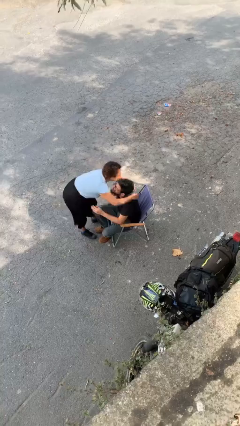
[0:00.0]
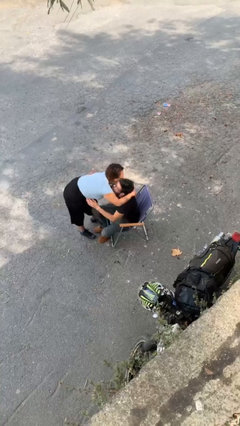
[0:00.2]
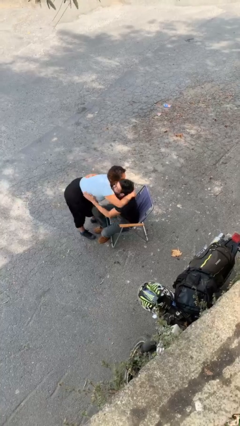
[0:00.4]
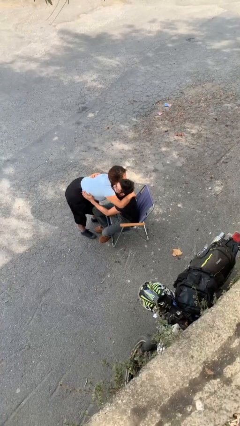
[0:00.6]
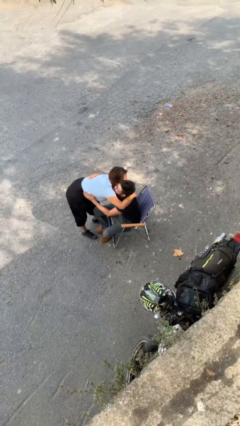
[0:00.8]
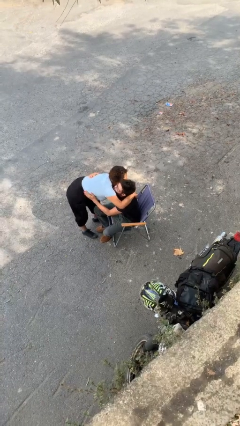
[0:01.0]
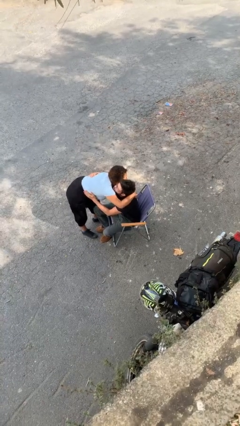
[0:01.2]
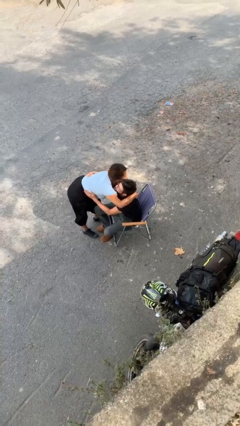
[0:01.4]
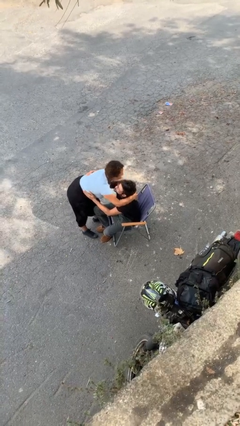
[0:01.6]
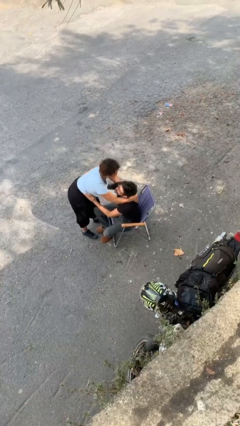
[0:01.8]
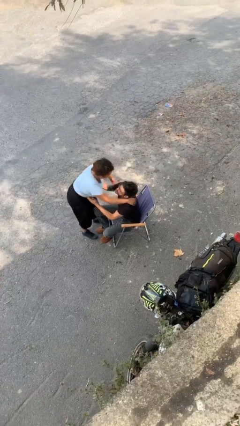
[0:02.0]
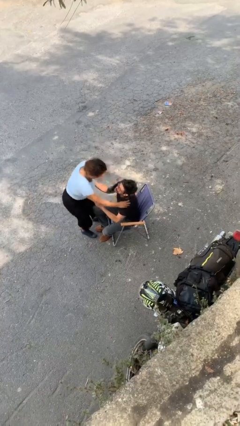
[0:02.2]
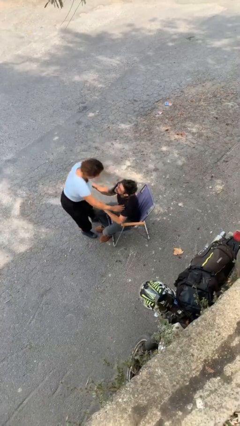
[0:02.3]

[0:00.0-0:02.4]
person embraces person

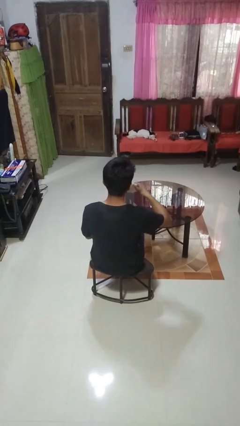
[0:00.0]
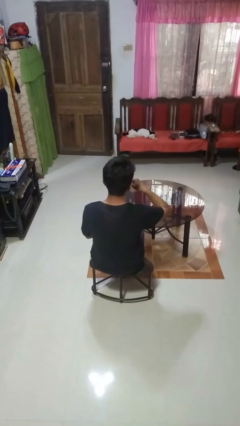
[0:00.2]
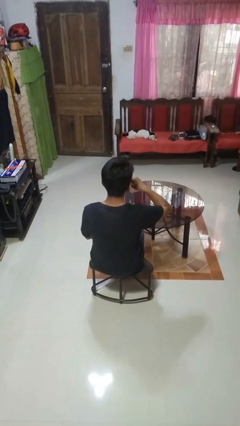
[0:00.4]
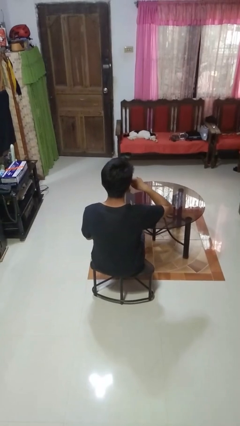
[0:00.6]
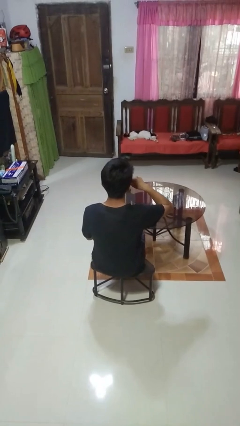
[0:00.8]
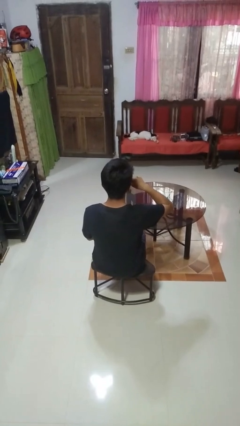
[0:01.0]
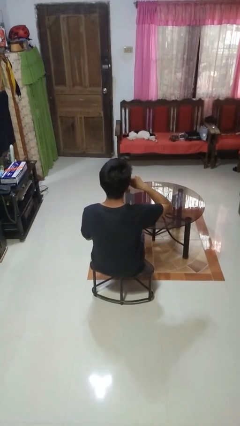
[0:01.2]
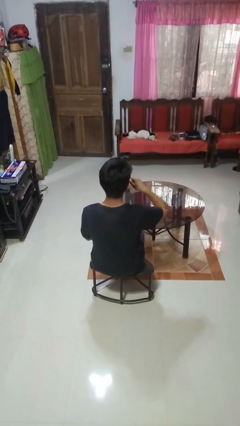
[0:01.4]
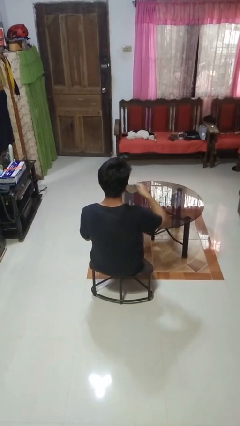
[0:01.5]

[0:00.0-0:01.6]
person drinks from mug

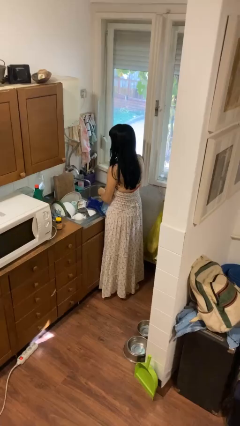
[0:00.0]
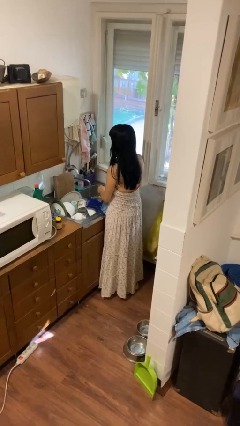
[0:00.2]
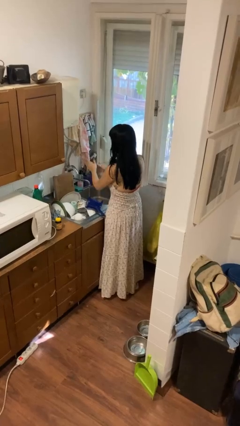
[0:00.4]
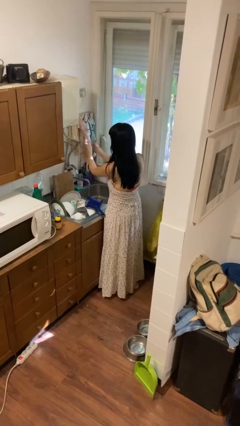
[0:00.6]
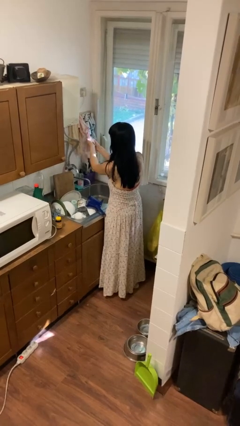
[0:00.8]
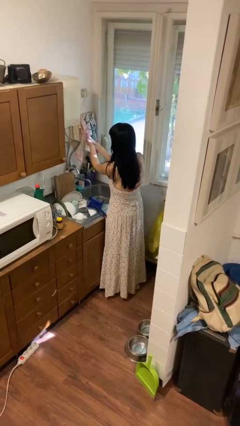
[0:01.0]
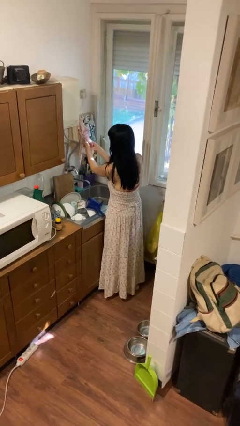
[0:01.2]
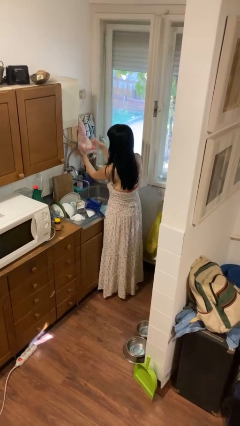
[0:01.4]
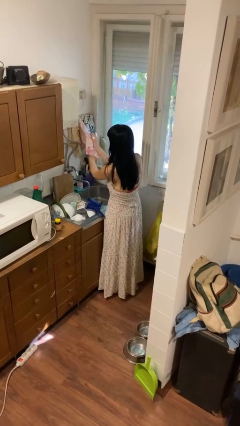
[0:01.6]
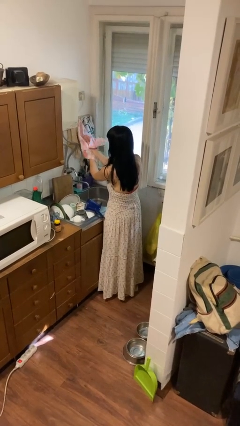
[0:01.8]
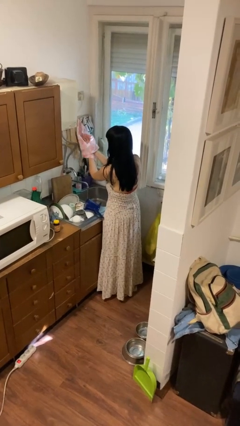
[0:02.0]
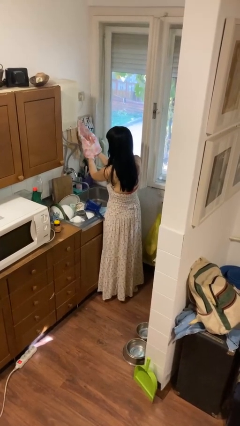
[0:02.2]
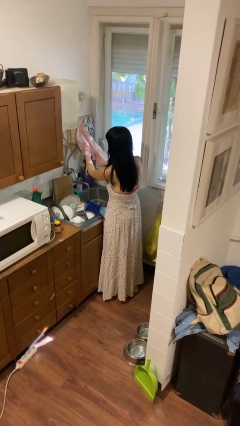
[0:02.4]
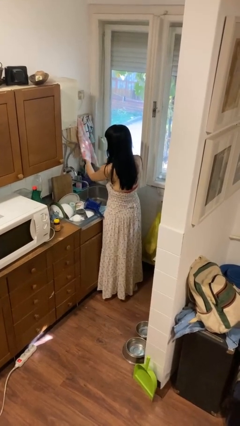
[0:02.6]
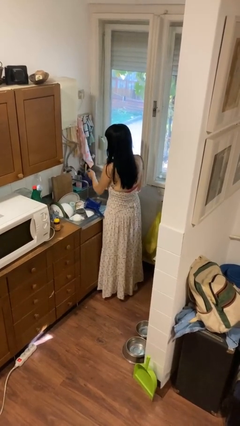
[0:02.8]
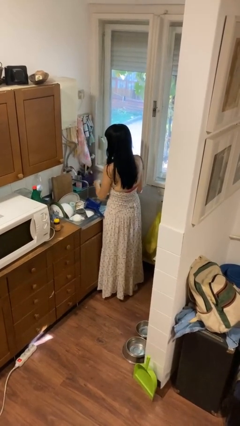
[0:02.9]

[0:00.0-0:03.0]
person dries hands with towel

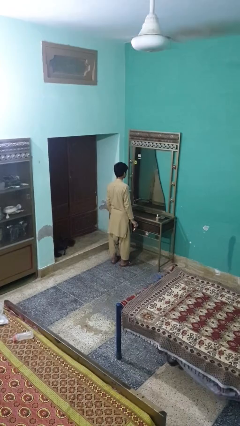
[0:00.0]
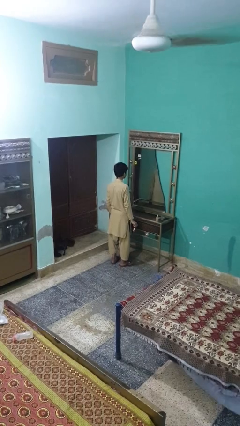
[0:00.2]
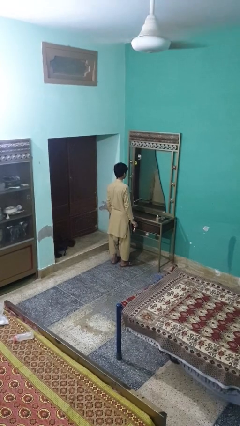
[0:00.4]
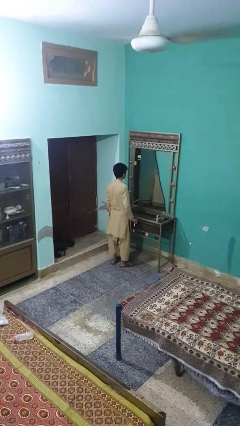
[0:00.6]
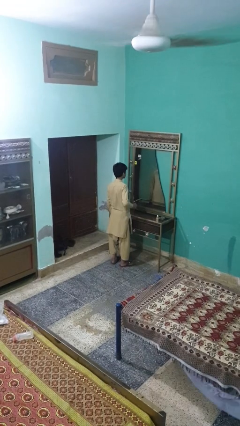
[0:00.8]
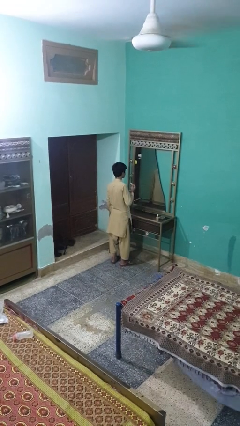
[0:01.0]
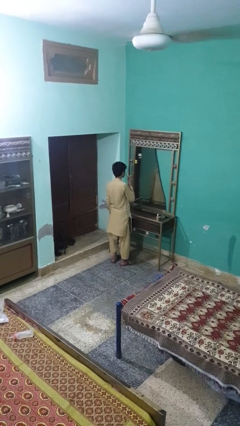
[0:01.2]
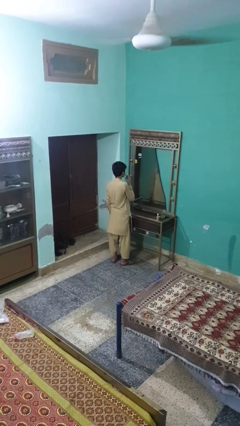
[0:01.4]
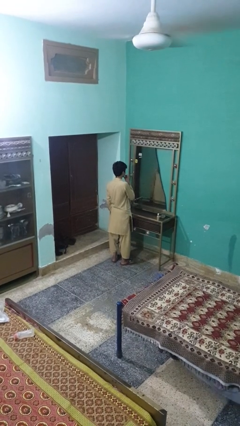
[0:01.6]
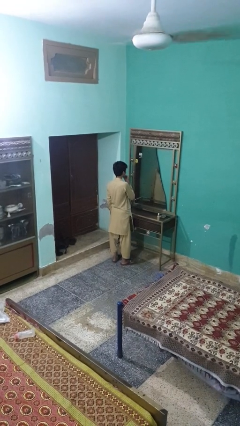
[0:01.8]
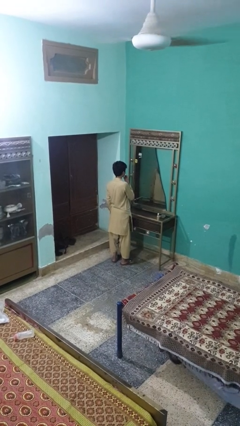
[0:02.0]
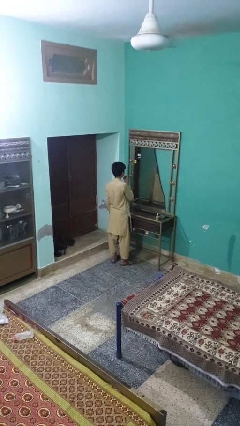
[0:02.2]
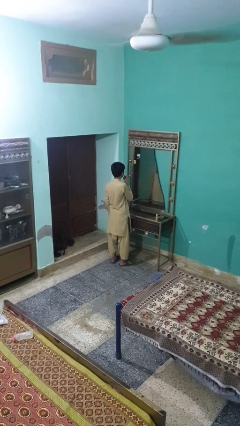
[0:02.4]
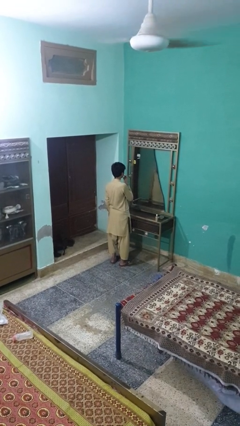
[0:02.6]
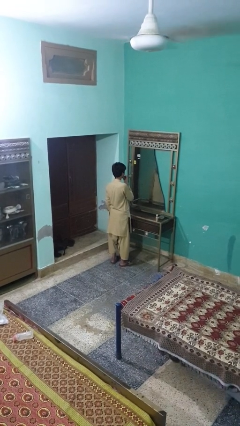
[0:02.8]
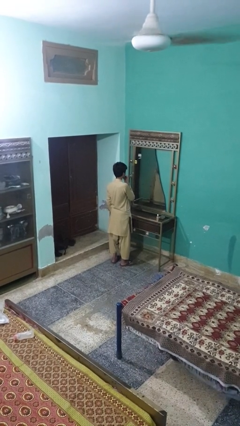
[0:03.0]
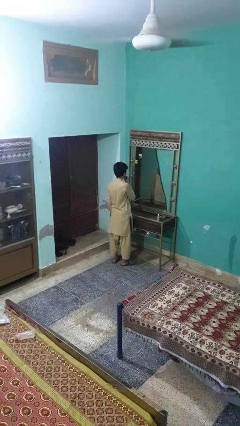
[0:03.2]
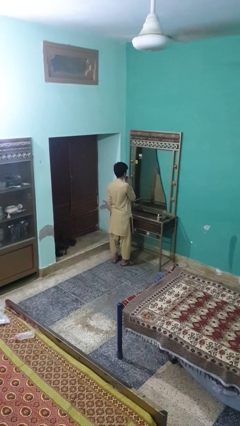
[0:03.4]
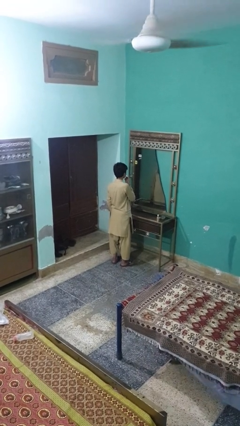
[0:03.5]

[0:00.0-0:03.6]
person applies lip makeup

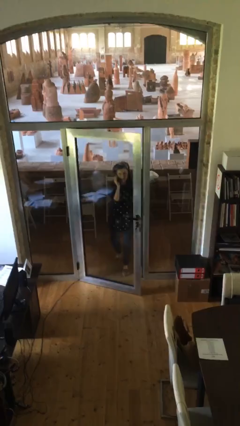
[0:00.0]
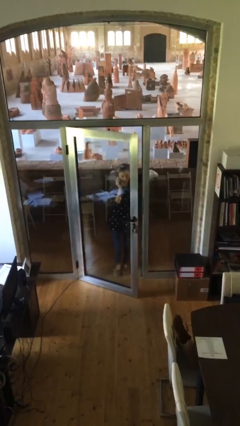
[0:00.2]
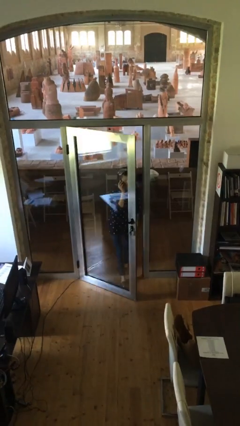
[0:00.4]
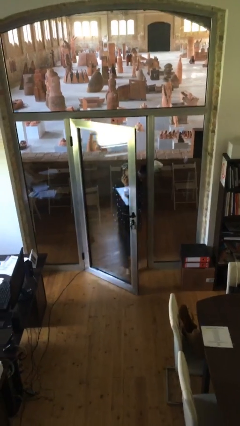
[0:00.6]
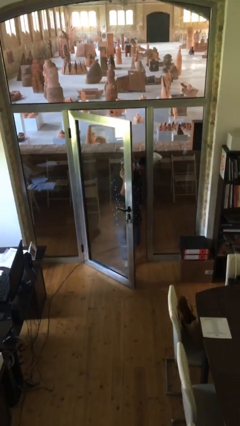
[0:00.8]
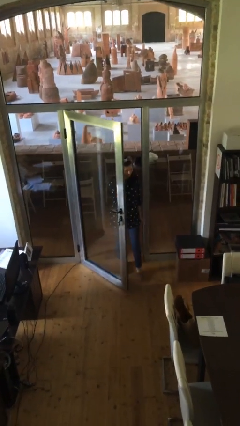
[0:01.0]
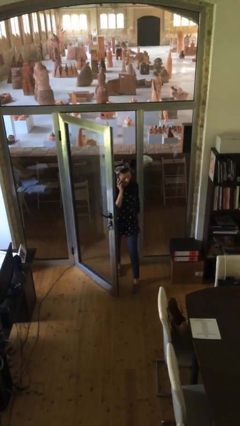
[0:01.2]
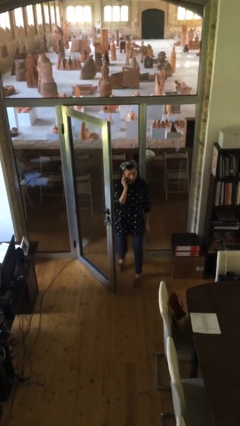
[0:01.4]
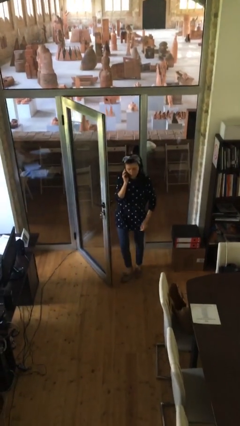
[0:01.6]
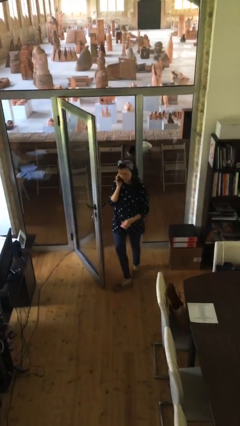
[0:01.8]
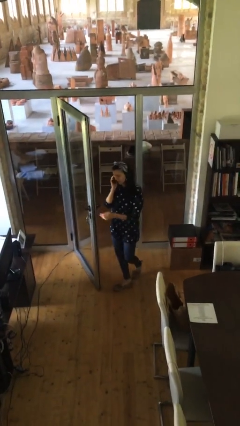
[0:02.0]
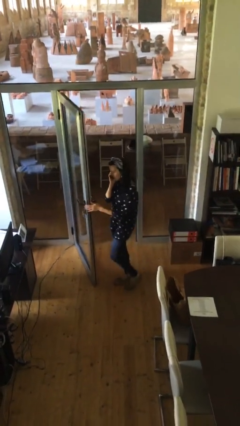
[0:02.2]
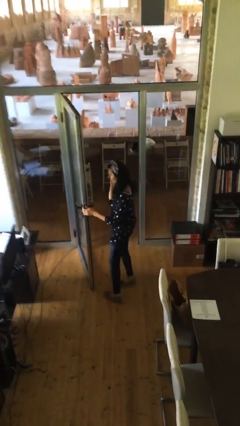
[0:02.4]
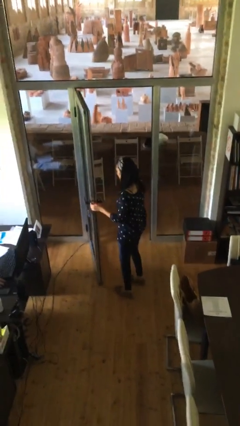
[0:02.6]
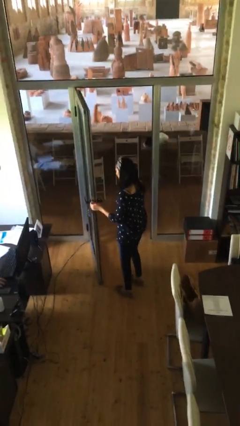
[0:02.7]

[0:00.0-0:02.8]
person enters scene through structure

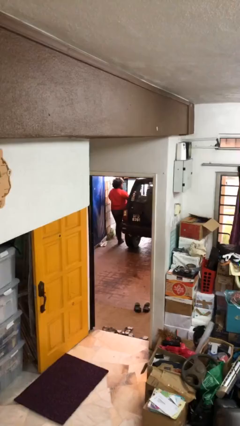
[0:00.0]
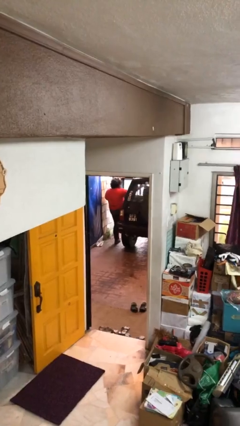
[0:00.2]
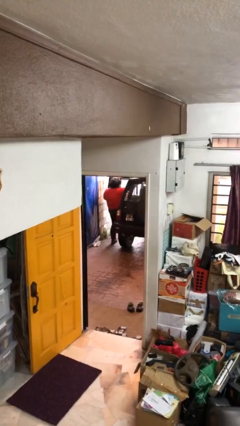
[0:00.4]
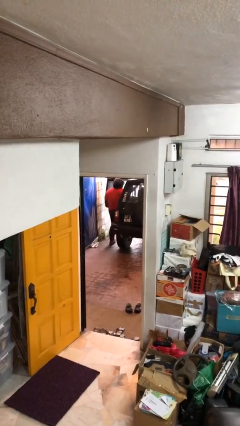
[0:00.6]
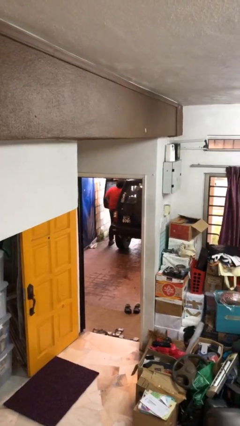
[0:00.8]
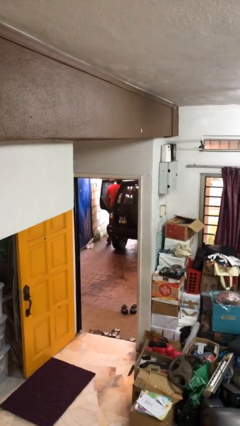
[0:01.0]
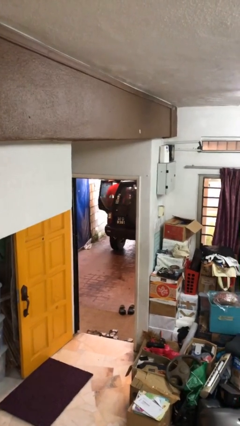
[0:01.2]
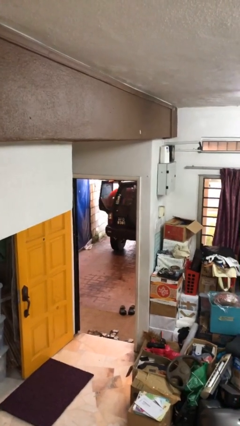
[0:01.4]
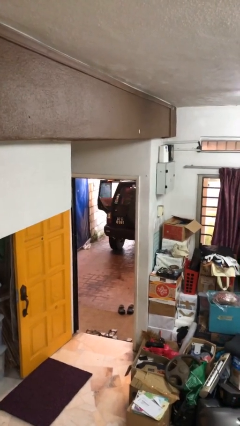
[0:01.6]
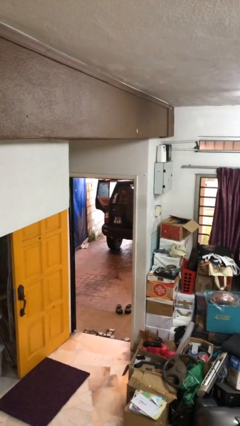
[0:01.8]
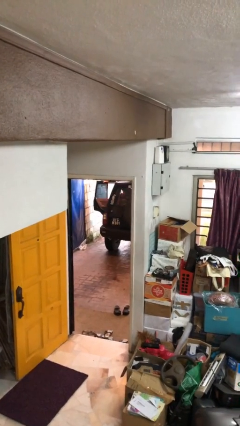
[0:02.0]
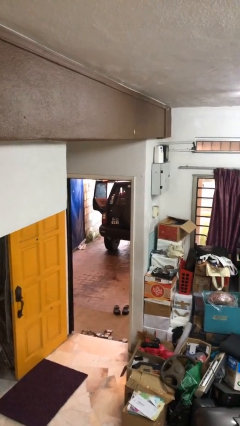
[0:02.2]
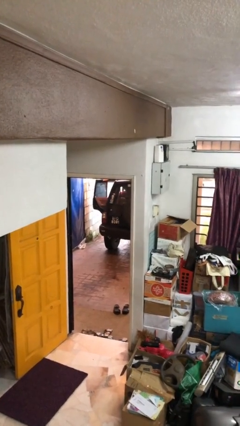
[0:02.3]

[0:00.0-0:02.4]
person enters car

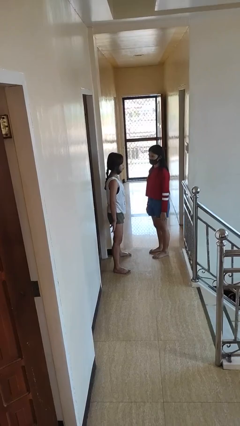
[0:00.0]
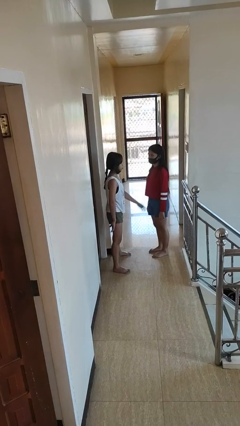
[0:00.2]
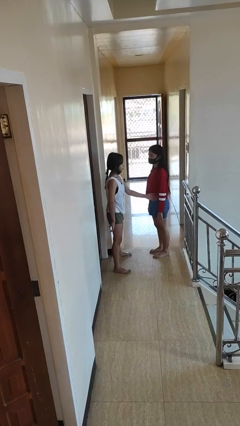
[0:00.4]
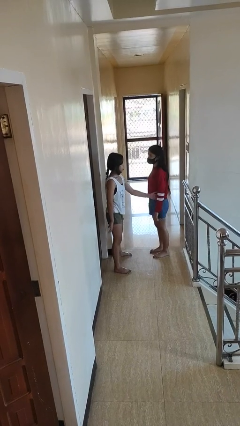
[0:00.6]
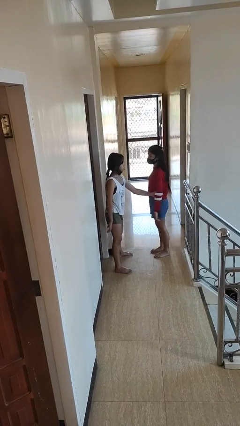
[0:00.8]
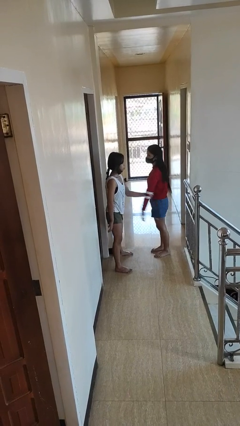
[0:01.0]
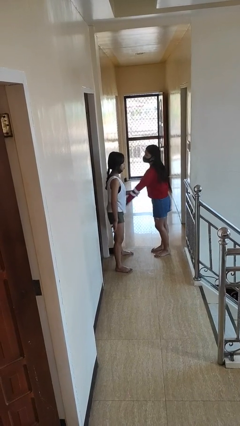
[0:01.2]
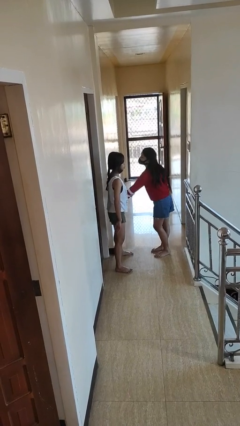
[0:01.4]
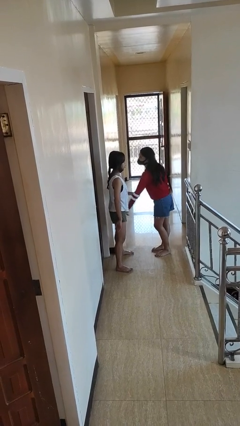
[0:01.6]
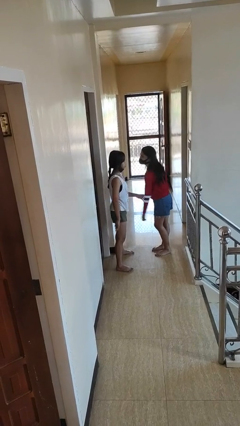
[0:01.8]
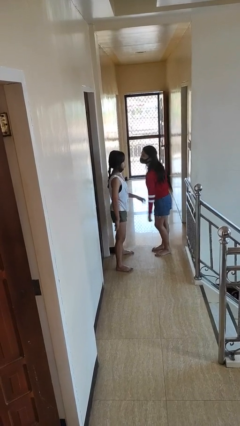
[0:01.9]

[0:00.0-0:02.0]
person grabs person by forearm
